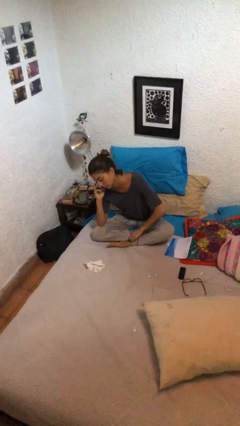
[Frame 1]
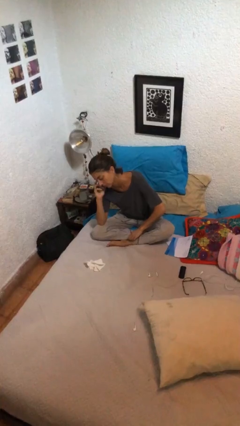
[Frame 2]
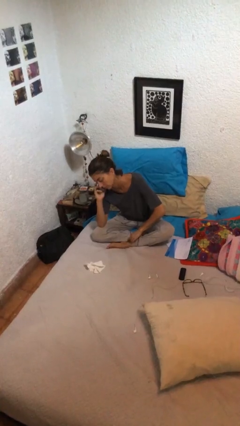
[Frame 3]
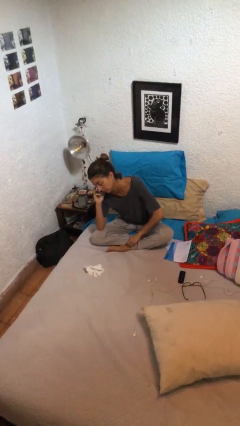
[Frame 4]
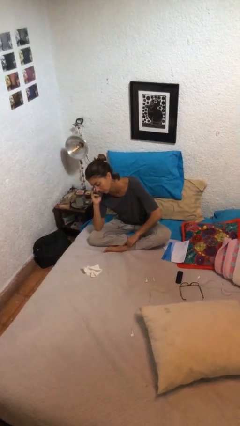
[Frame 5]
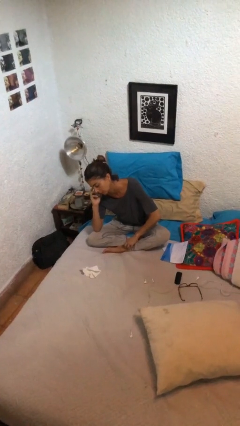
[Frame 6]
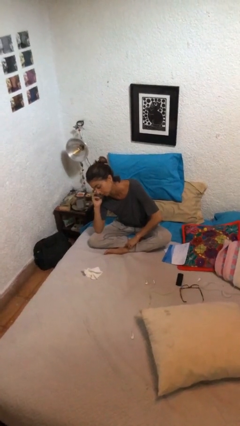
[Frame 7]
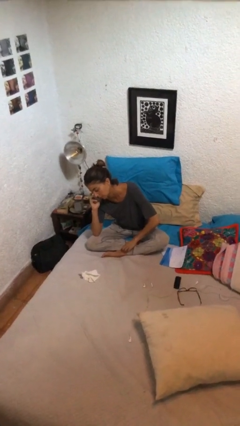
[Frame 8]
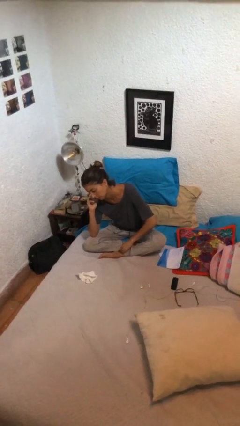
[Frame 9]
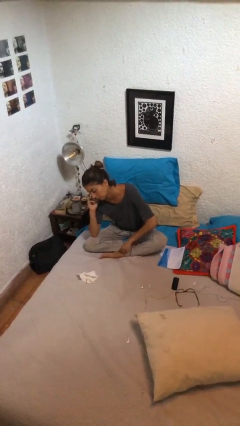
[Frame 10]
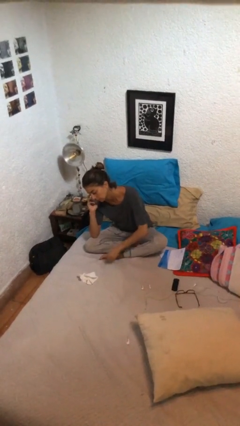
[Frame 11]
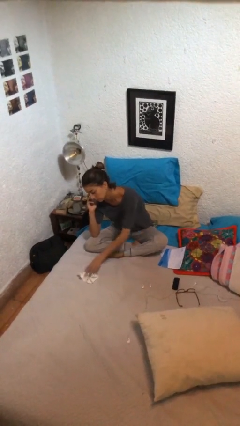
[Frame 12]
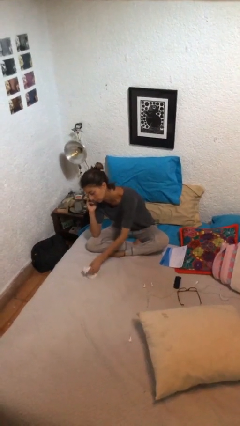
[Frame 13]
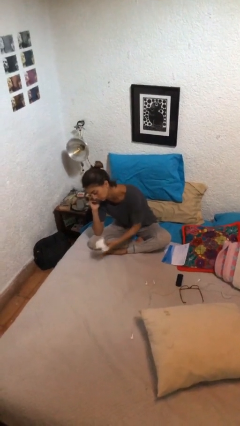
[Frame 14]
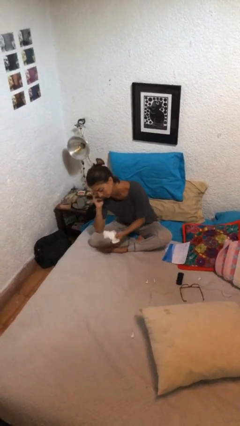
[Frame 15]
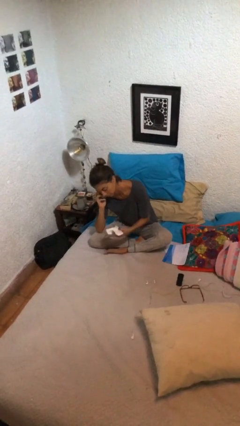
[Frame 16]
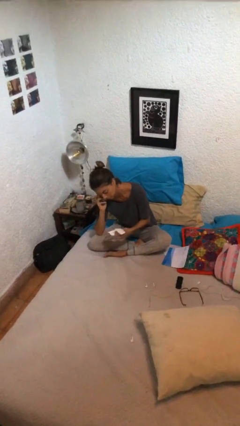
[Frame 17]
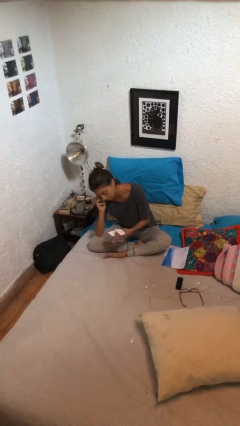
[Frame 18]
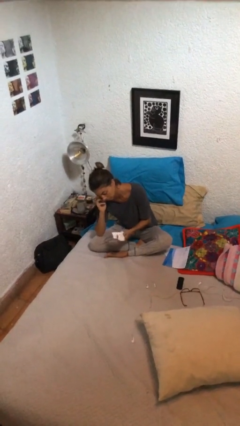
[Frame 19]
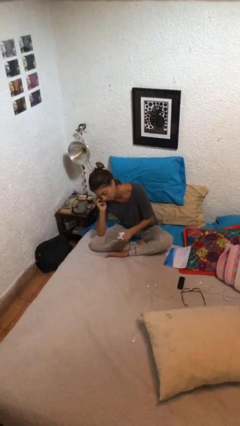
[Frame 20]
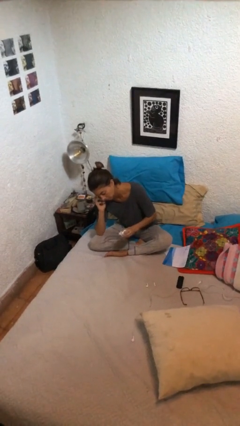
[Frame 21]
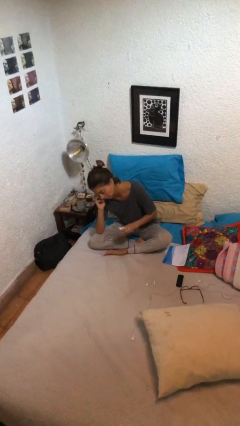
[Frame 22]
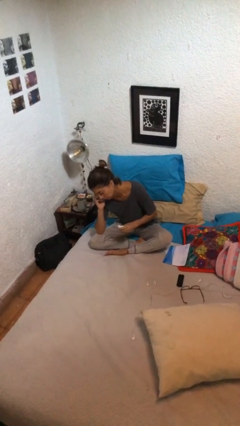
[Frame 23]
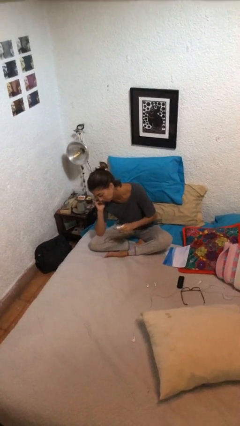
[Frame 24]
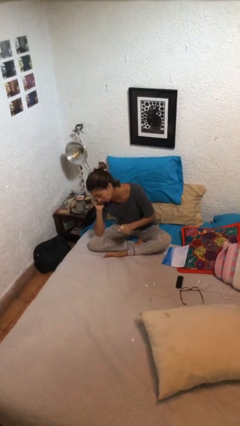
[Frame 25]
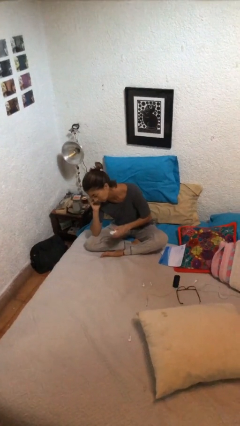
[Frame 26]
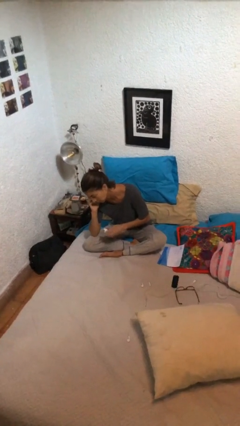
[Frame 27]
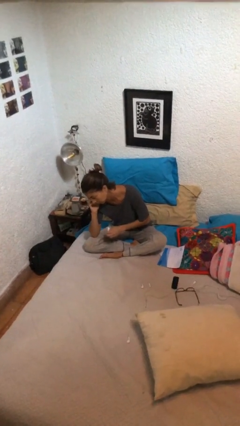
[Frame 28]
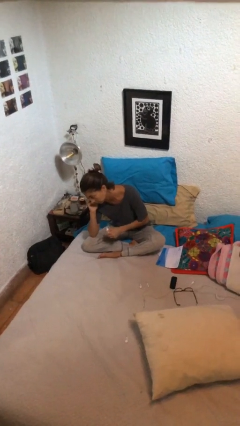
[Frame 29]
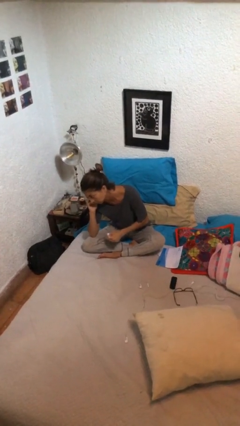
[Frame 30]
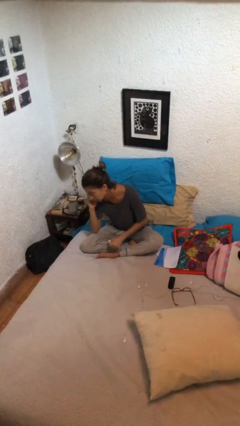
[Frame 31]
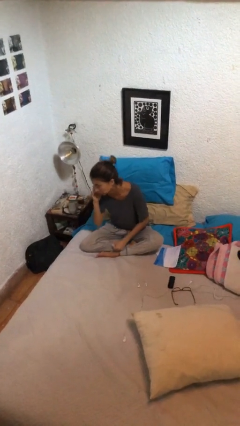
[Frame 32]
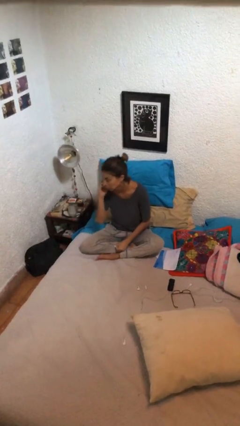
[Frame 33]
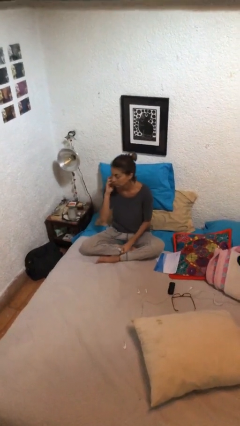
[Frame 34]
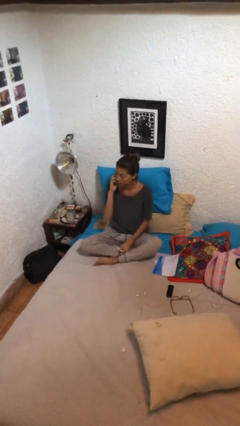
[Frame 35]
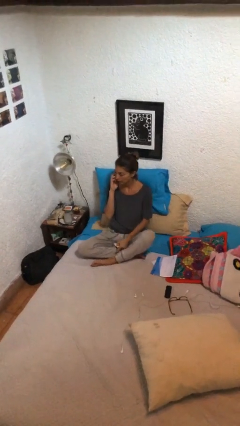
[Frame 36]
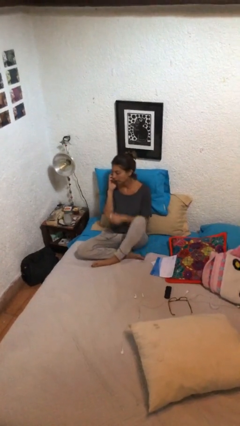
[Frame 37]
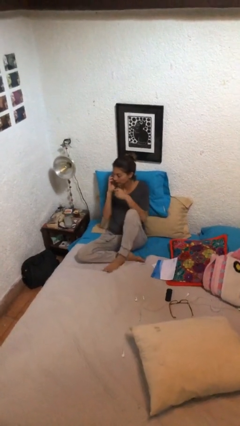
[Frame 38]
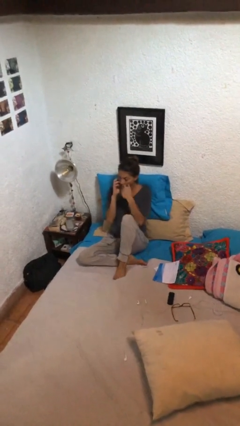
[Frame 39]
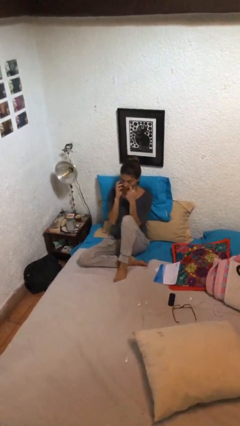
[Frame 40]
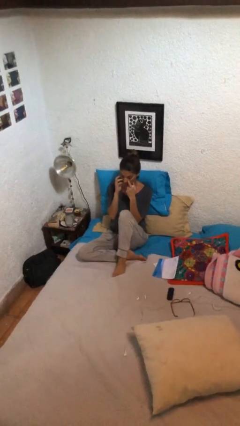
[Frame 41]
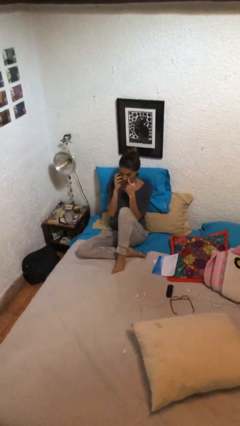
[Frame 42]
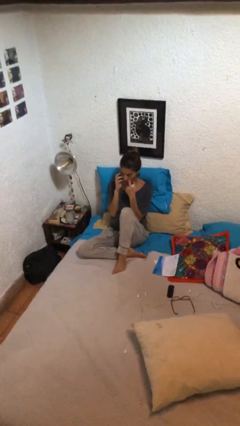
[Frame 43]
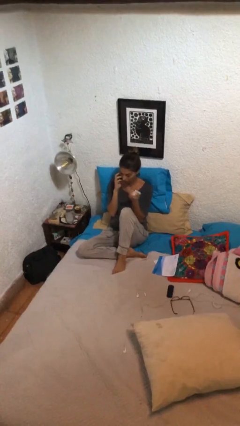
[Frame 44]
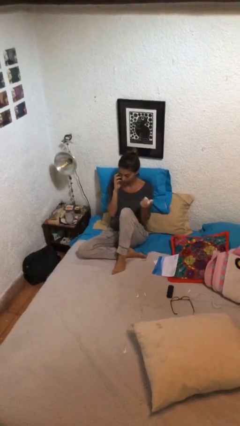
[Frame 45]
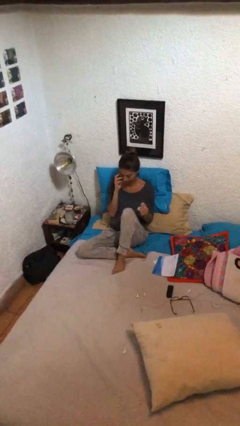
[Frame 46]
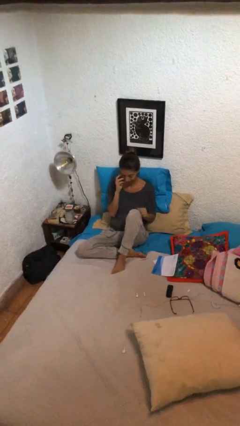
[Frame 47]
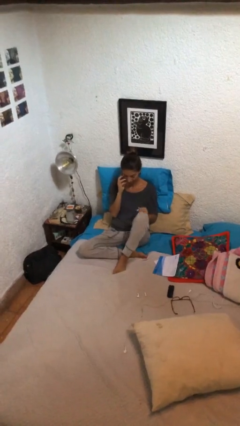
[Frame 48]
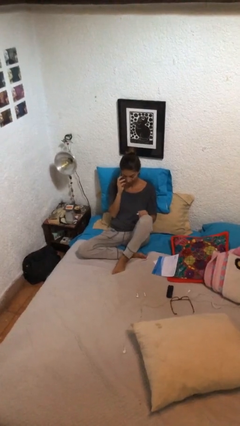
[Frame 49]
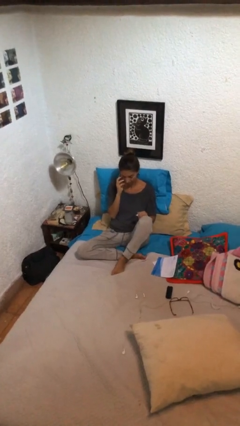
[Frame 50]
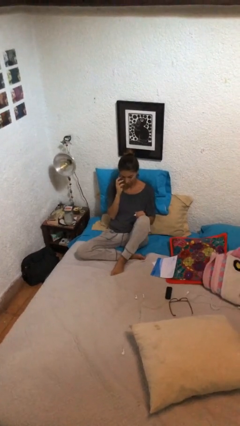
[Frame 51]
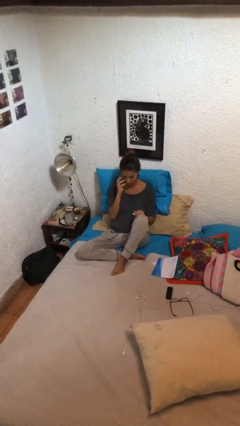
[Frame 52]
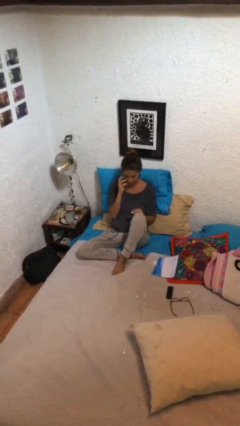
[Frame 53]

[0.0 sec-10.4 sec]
person talks on phone

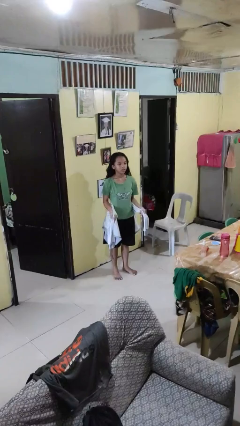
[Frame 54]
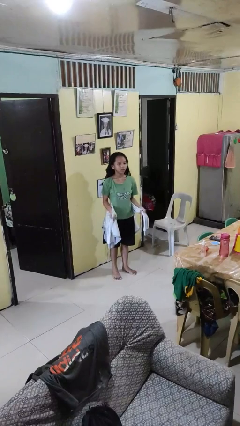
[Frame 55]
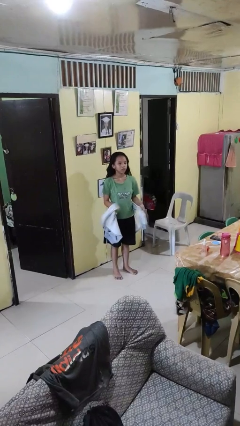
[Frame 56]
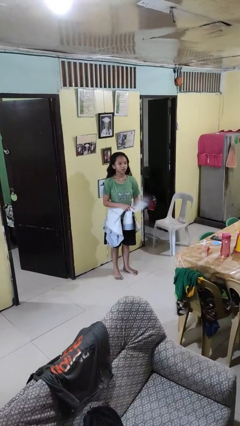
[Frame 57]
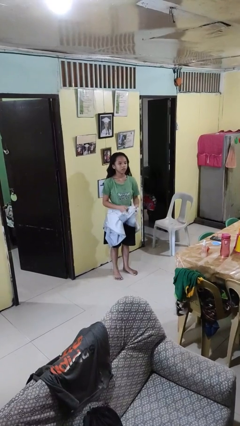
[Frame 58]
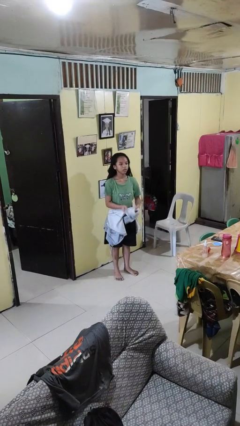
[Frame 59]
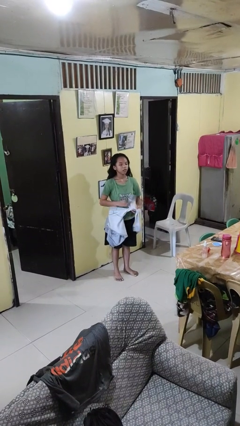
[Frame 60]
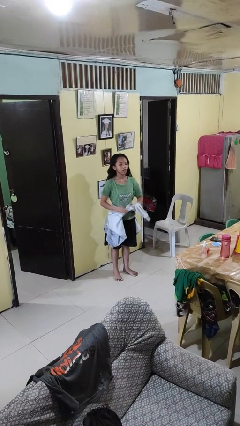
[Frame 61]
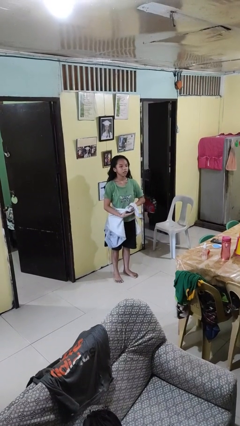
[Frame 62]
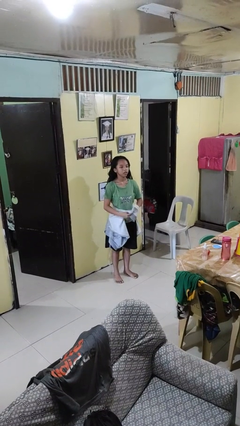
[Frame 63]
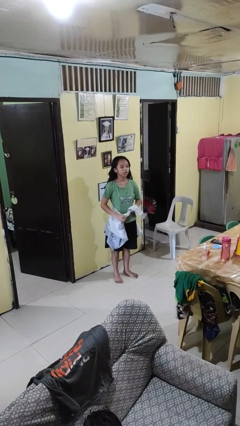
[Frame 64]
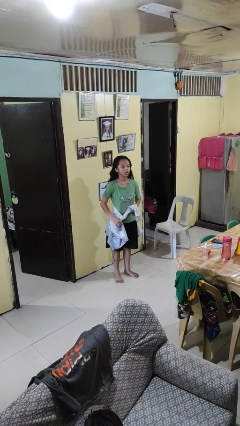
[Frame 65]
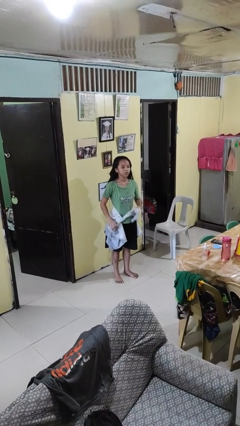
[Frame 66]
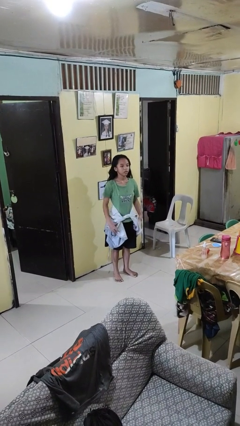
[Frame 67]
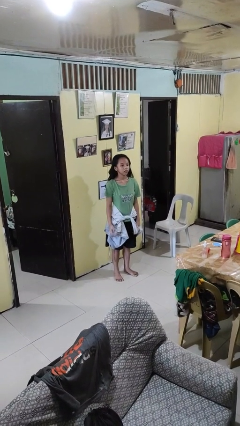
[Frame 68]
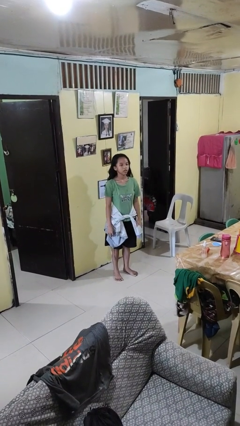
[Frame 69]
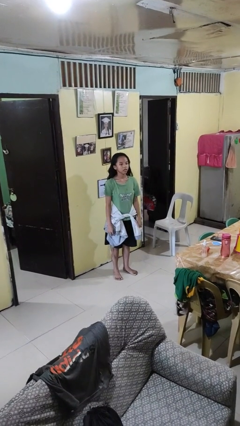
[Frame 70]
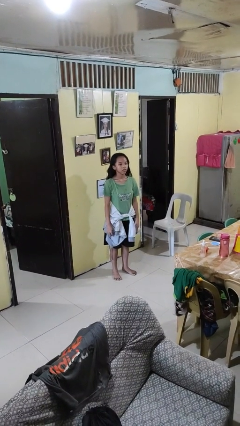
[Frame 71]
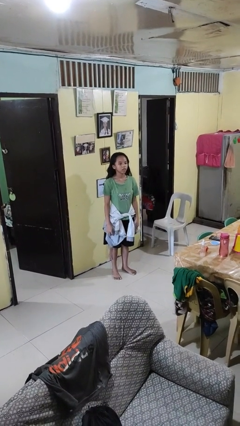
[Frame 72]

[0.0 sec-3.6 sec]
person ties jacket around waist

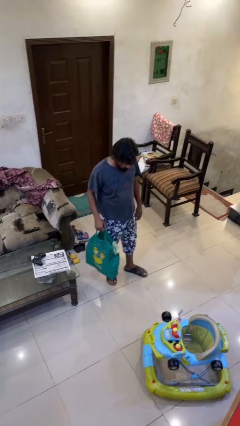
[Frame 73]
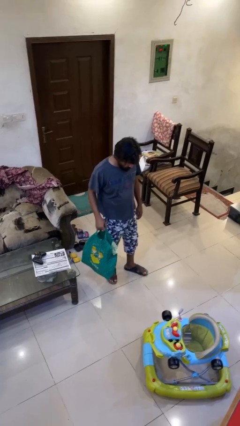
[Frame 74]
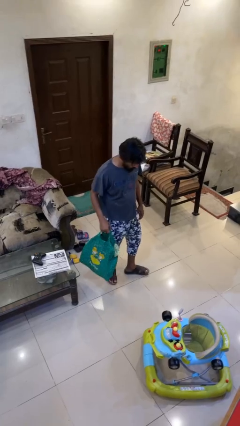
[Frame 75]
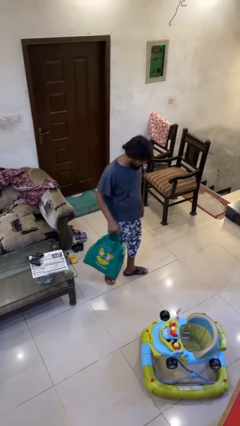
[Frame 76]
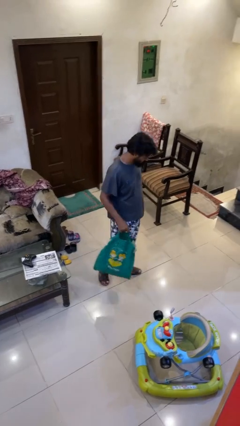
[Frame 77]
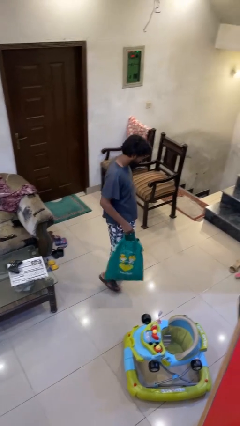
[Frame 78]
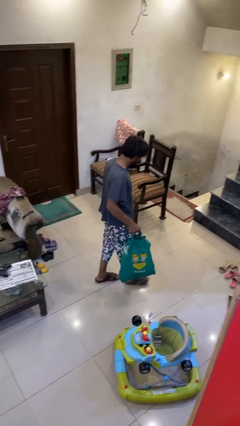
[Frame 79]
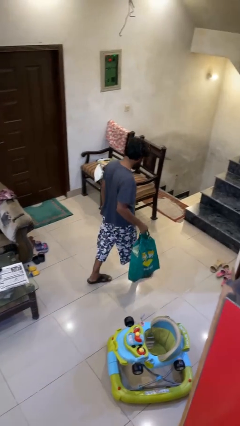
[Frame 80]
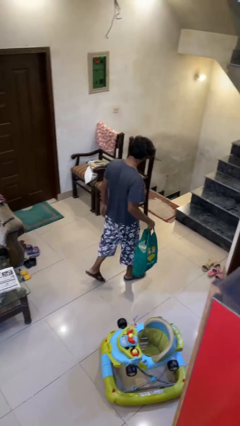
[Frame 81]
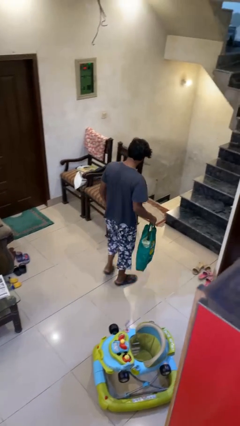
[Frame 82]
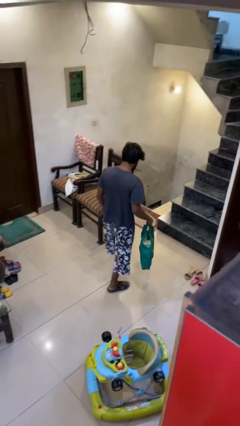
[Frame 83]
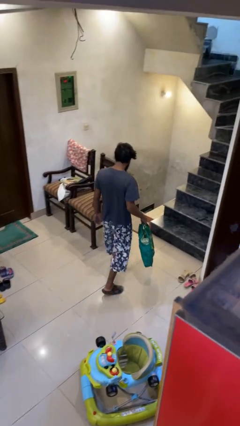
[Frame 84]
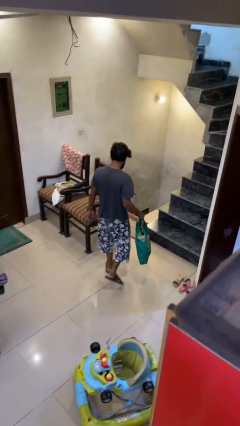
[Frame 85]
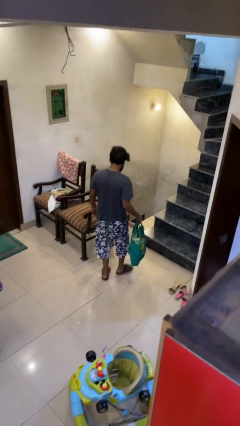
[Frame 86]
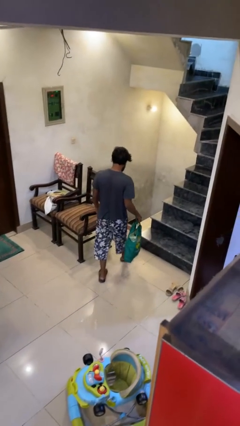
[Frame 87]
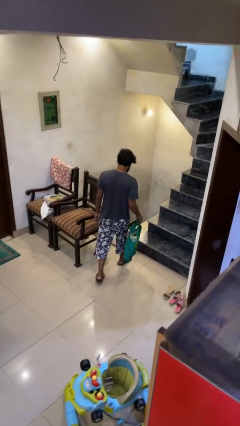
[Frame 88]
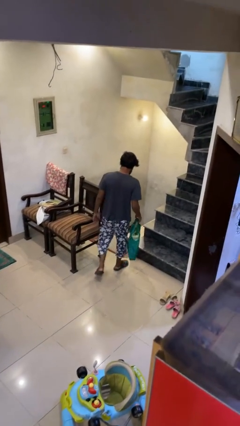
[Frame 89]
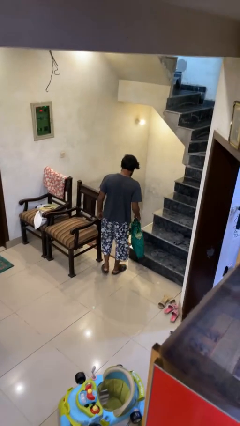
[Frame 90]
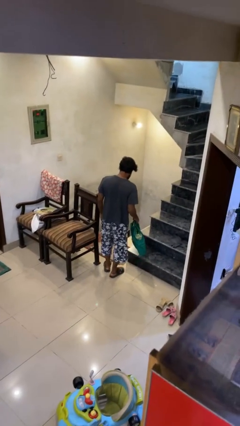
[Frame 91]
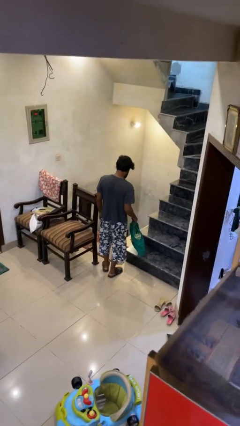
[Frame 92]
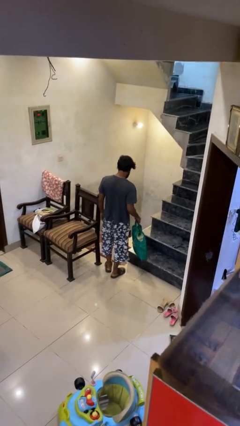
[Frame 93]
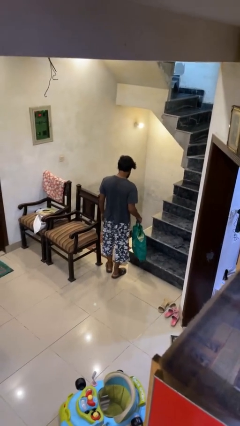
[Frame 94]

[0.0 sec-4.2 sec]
person carries groceries
